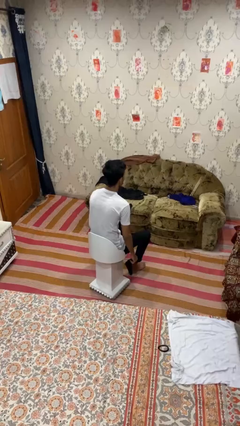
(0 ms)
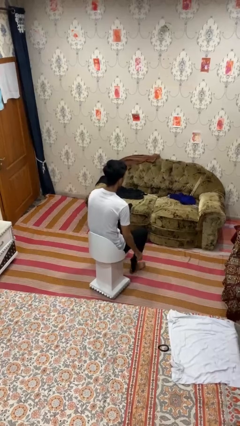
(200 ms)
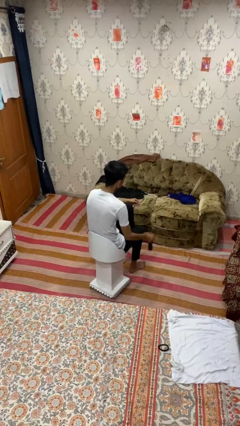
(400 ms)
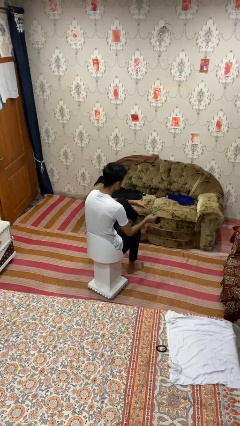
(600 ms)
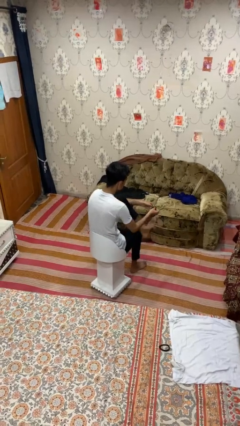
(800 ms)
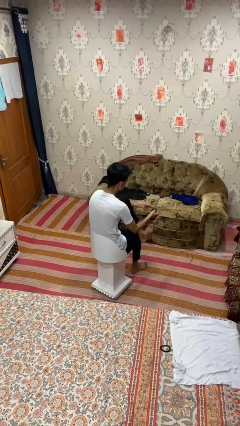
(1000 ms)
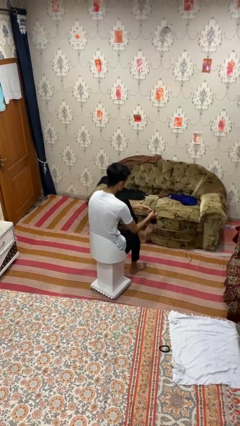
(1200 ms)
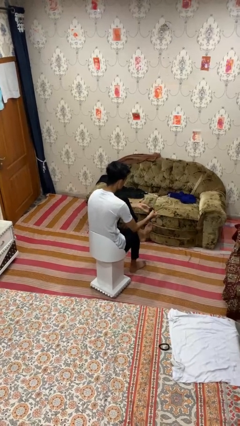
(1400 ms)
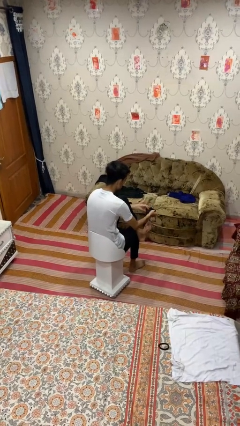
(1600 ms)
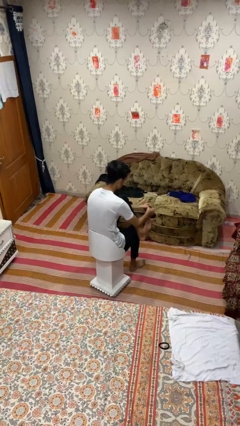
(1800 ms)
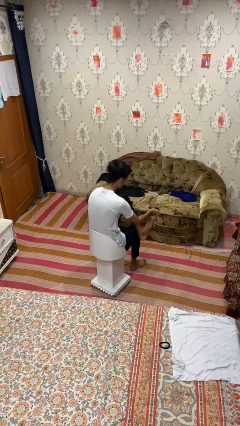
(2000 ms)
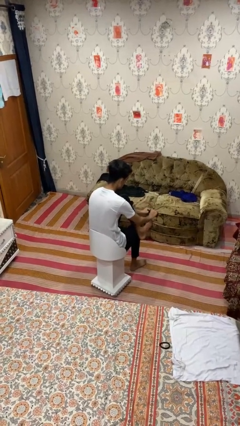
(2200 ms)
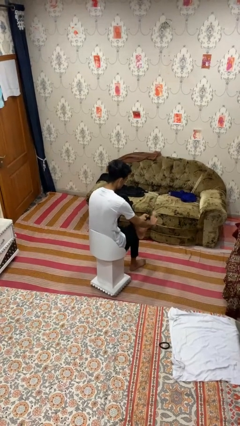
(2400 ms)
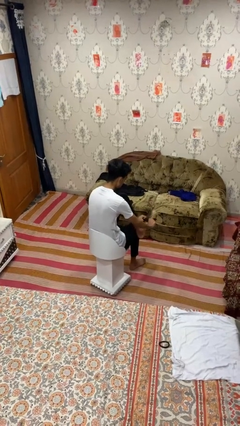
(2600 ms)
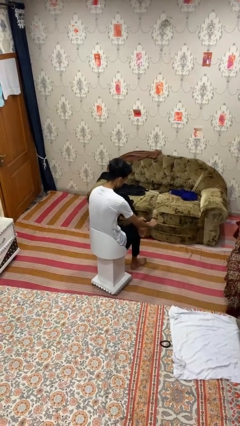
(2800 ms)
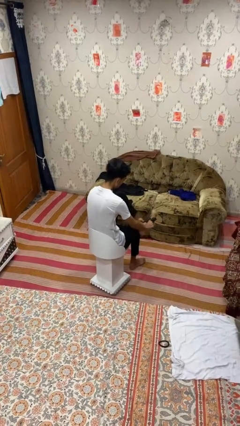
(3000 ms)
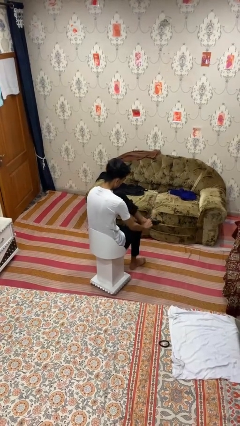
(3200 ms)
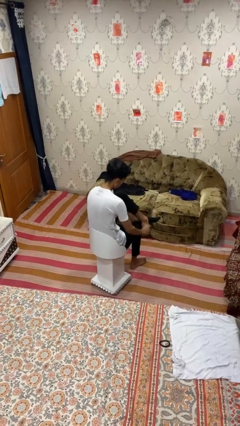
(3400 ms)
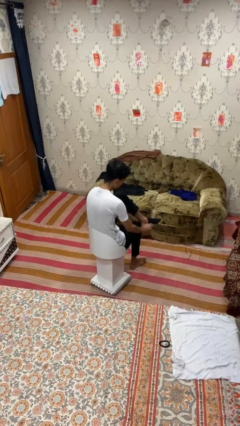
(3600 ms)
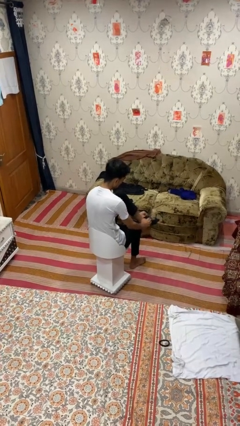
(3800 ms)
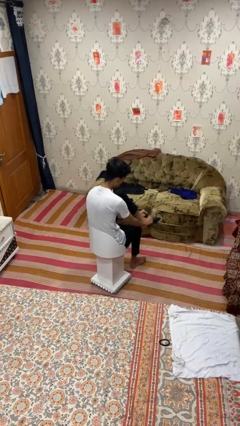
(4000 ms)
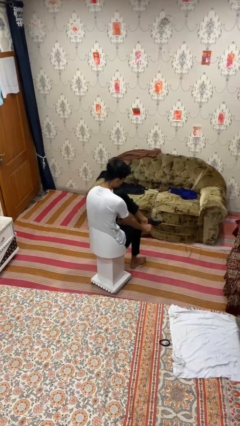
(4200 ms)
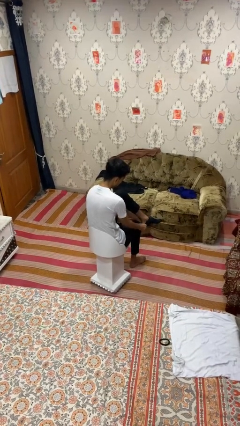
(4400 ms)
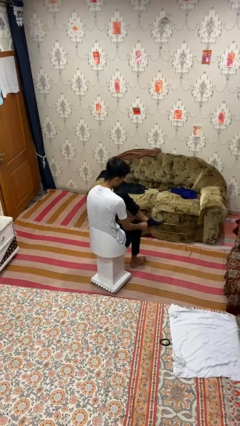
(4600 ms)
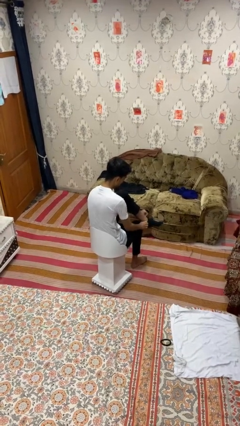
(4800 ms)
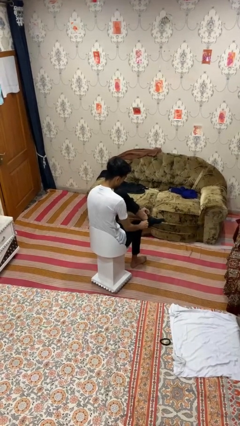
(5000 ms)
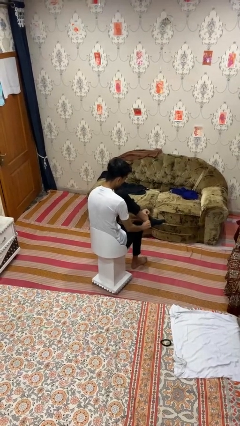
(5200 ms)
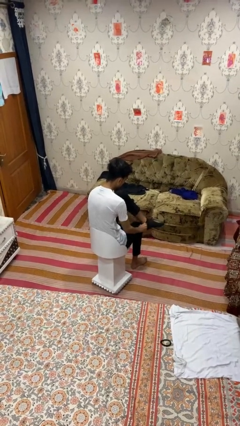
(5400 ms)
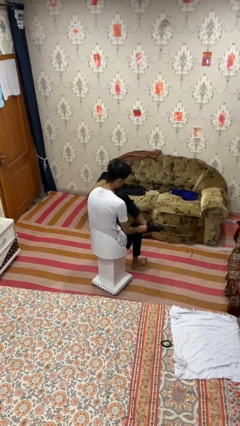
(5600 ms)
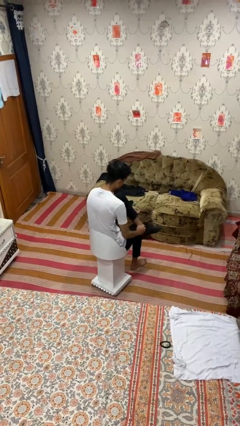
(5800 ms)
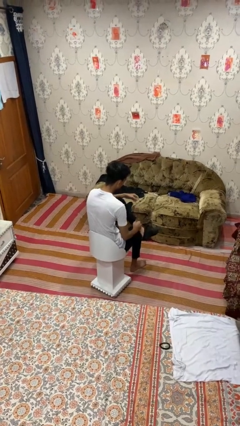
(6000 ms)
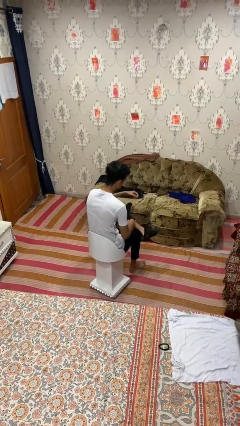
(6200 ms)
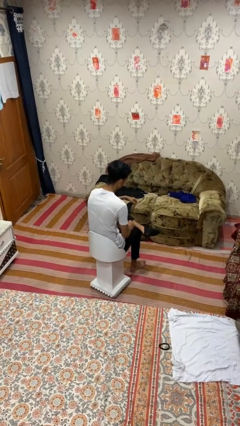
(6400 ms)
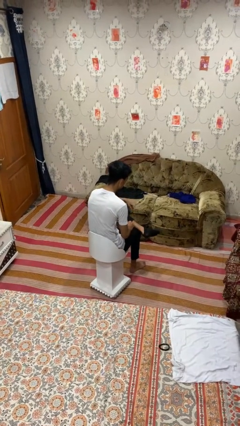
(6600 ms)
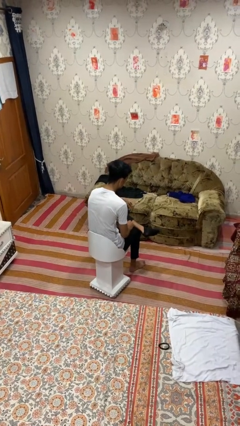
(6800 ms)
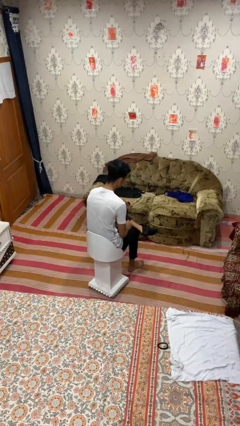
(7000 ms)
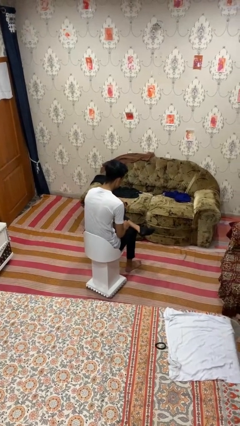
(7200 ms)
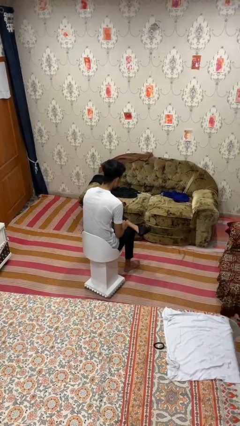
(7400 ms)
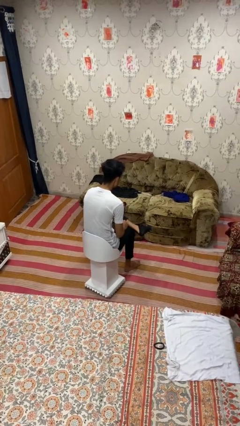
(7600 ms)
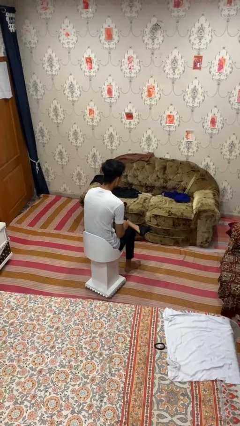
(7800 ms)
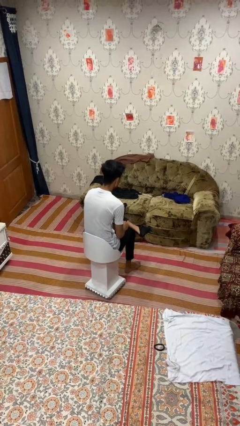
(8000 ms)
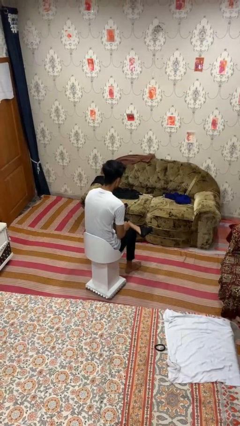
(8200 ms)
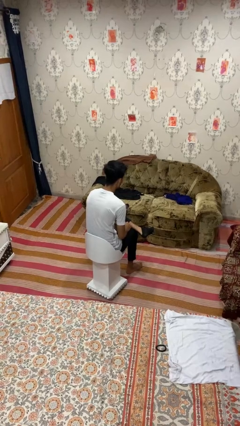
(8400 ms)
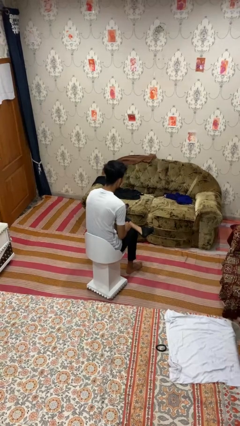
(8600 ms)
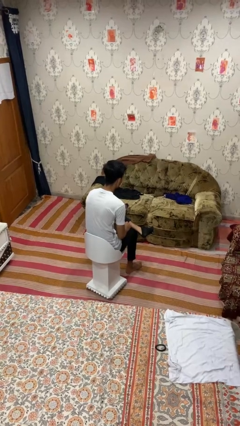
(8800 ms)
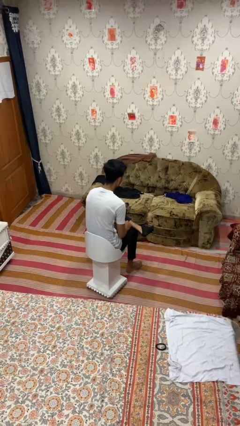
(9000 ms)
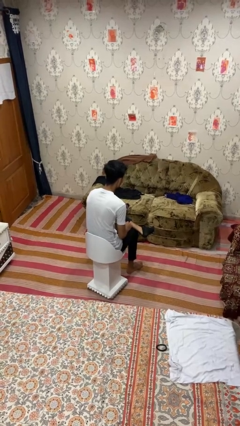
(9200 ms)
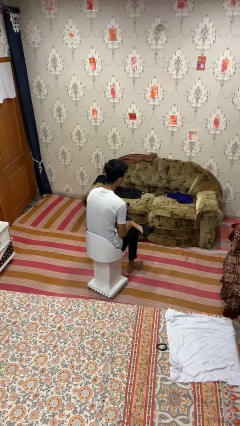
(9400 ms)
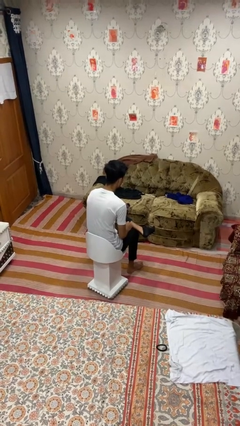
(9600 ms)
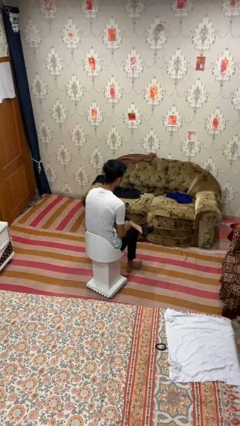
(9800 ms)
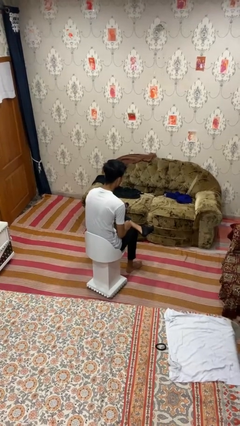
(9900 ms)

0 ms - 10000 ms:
person puts on socks

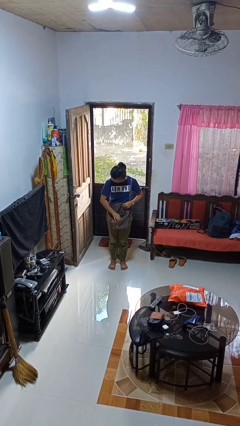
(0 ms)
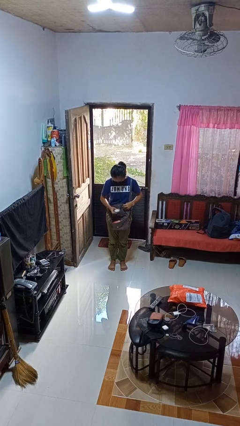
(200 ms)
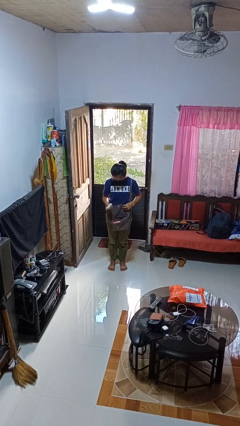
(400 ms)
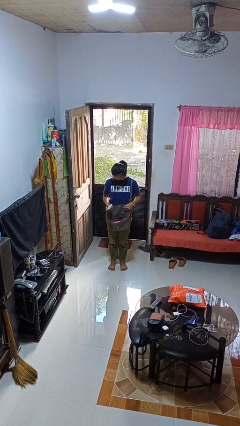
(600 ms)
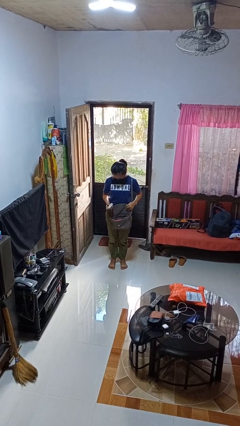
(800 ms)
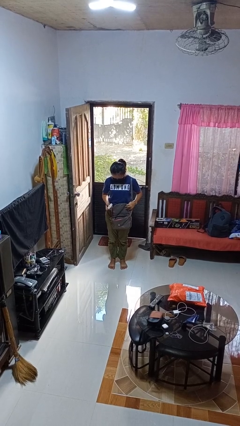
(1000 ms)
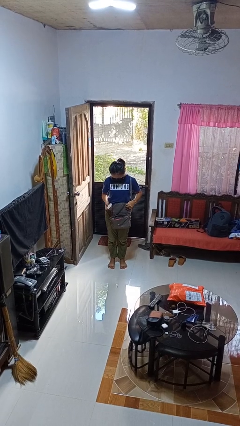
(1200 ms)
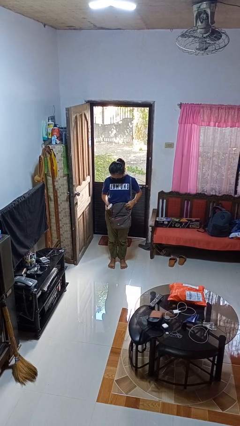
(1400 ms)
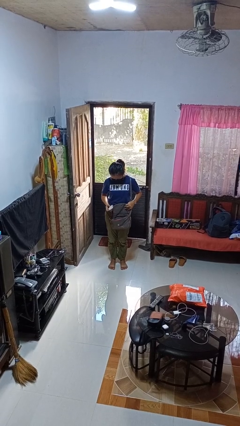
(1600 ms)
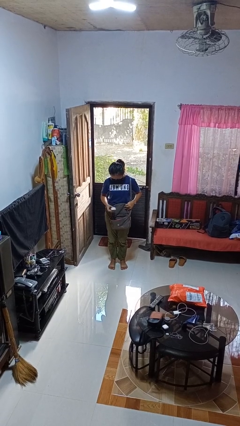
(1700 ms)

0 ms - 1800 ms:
person takes object from purse

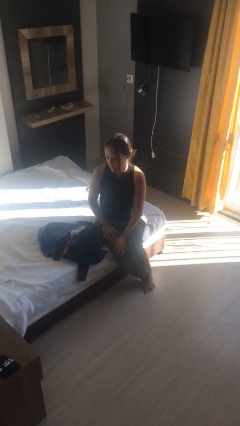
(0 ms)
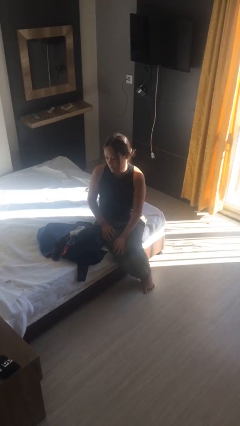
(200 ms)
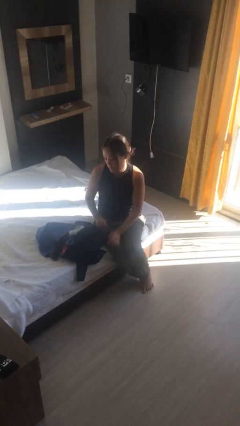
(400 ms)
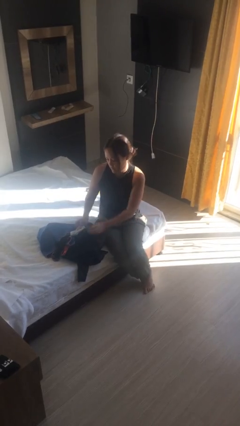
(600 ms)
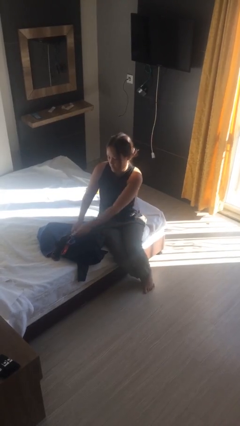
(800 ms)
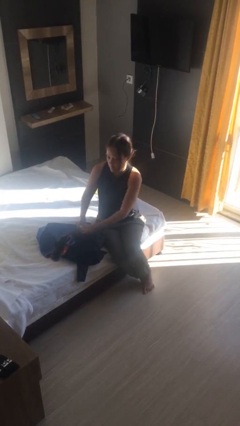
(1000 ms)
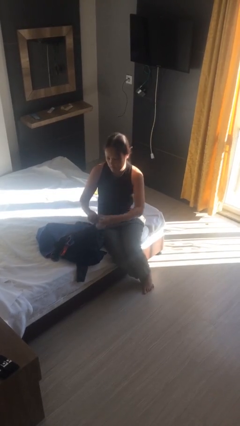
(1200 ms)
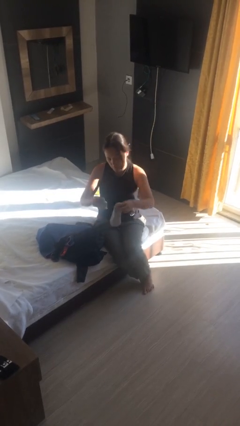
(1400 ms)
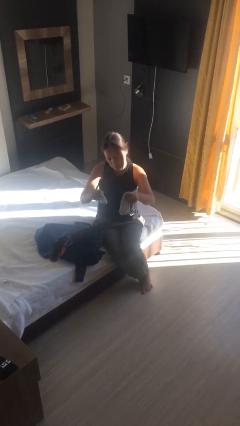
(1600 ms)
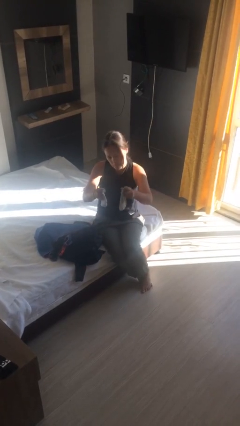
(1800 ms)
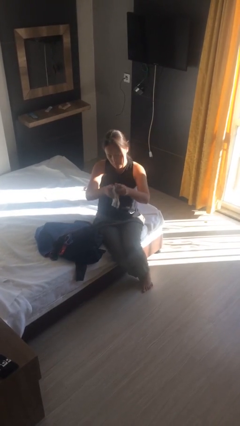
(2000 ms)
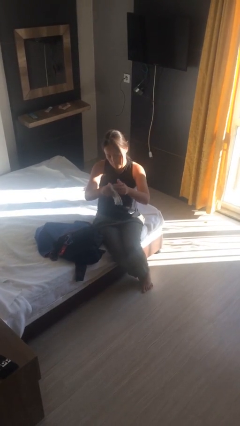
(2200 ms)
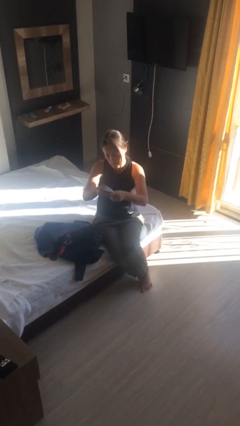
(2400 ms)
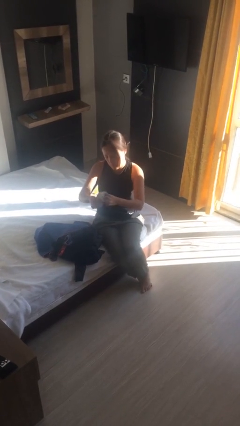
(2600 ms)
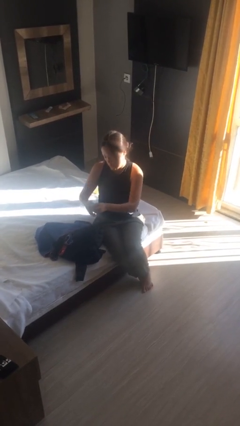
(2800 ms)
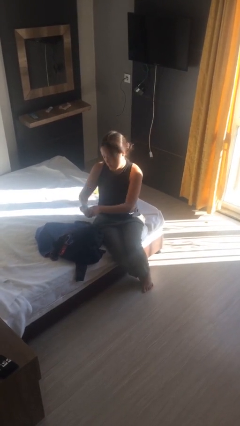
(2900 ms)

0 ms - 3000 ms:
person folds shirt

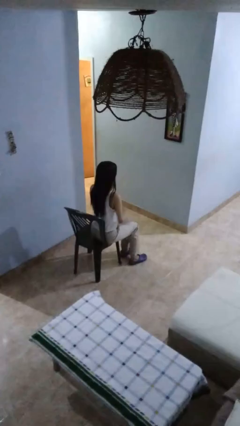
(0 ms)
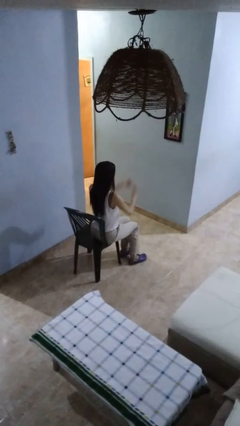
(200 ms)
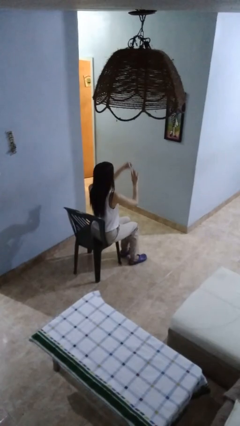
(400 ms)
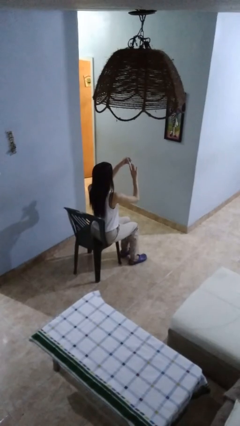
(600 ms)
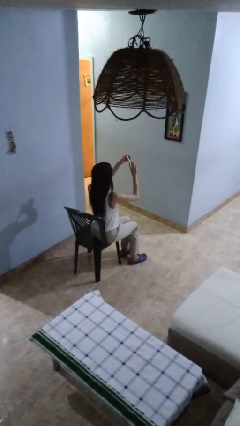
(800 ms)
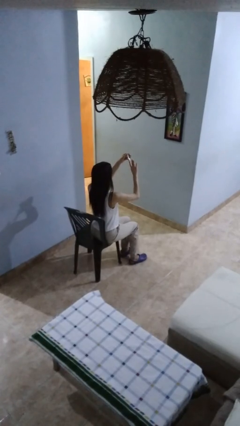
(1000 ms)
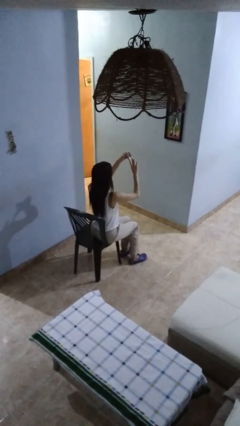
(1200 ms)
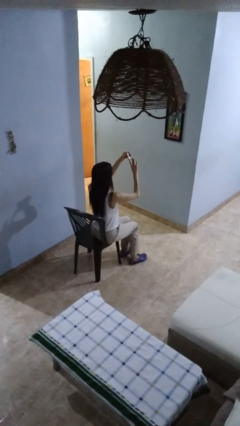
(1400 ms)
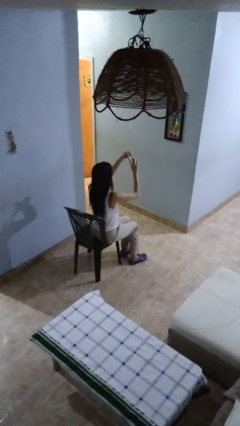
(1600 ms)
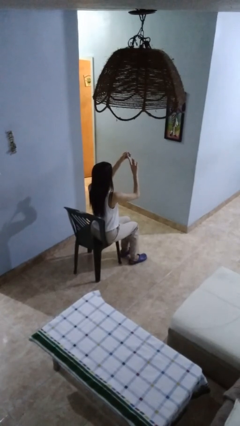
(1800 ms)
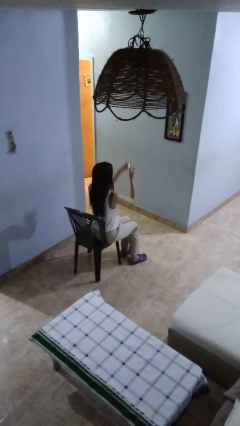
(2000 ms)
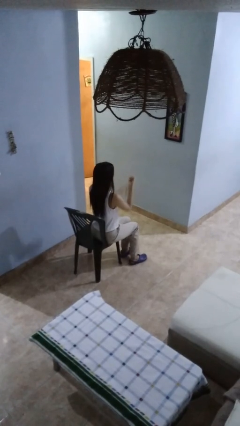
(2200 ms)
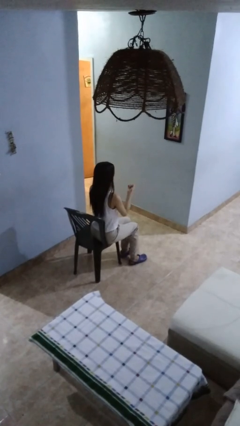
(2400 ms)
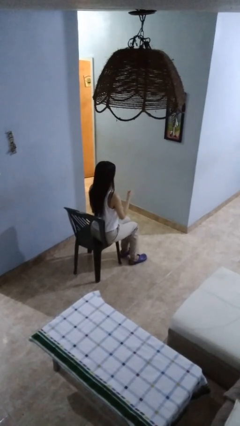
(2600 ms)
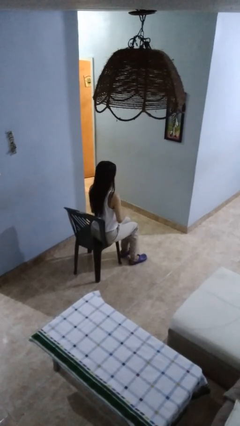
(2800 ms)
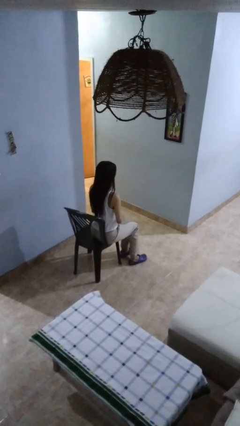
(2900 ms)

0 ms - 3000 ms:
person clips fingernails

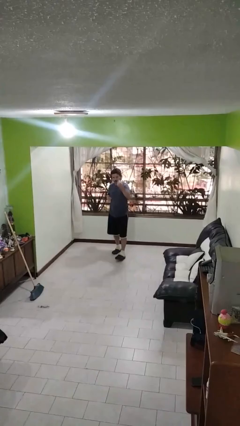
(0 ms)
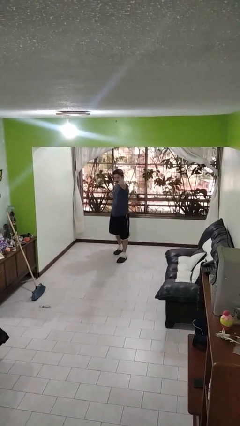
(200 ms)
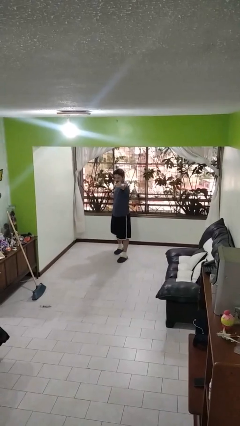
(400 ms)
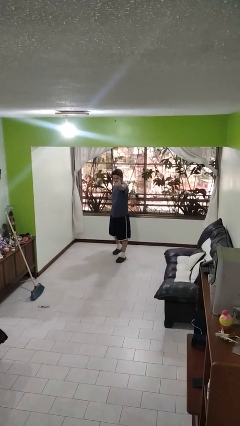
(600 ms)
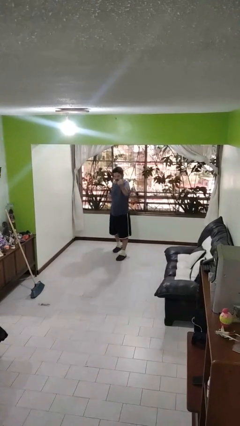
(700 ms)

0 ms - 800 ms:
person punches
